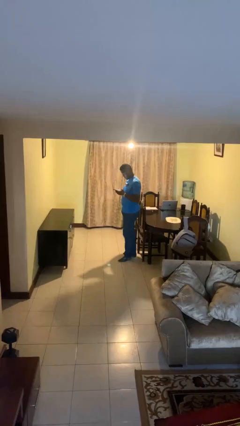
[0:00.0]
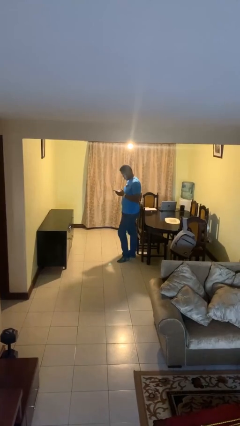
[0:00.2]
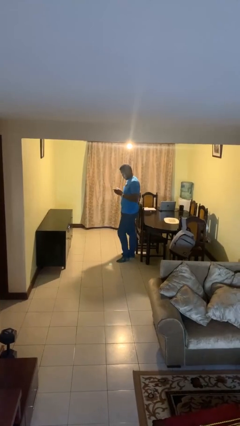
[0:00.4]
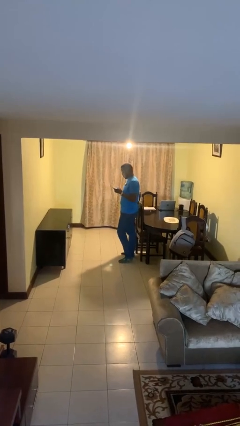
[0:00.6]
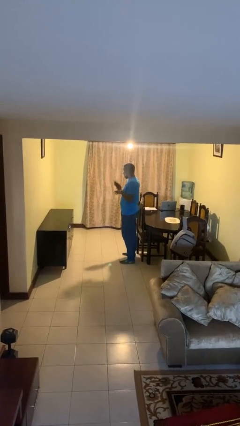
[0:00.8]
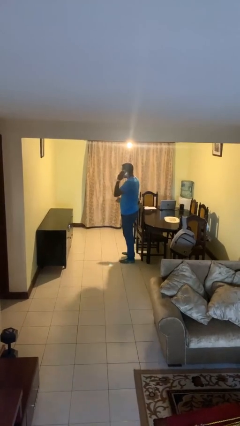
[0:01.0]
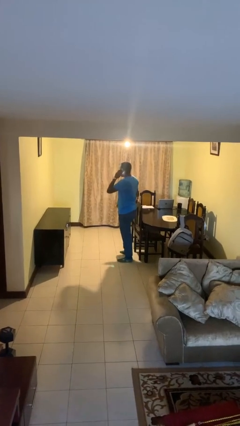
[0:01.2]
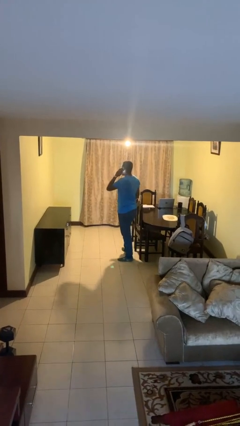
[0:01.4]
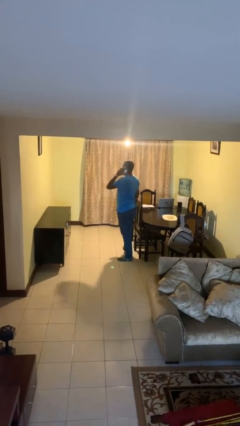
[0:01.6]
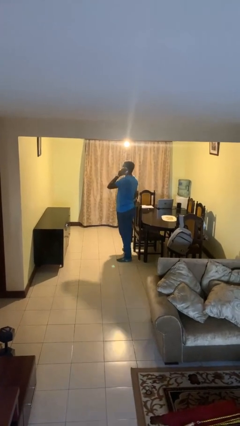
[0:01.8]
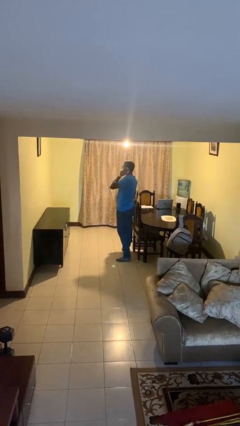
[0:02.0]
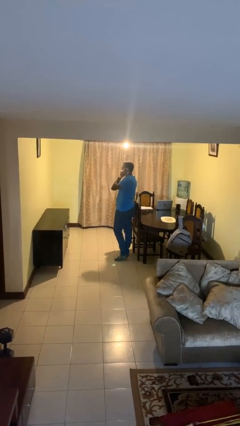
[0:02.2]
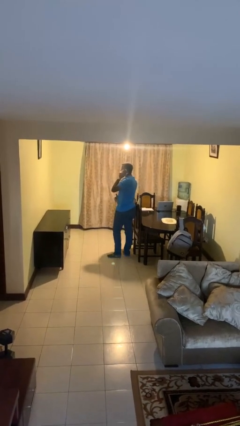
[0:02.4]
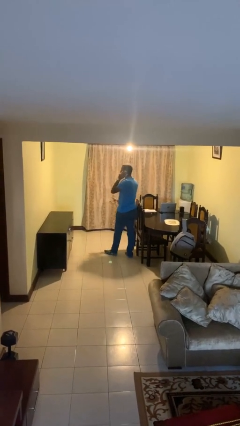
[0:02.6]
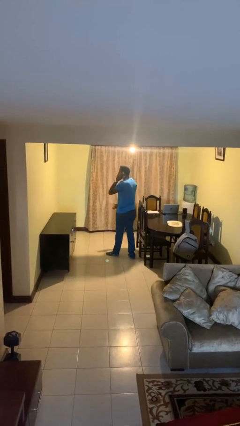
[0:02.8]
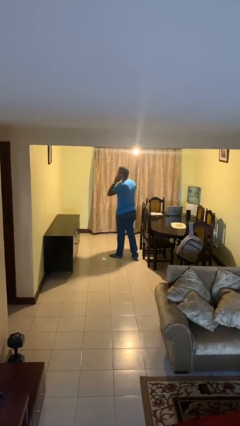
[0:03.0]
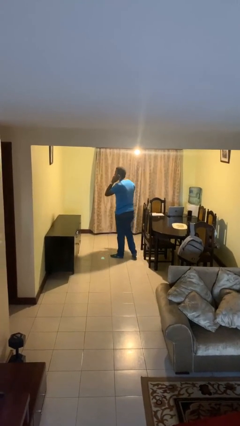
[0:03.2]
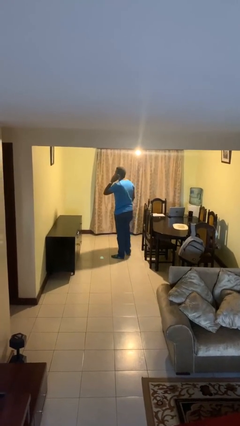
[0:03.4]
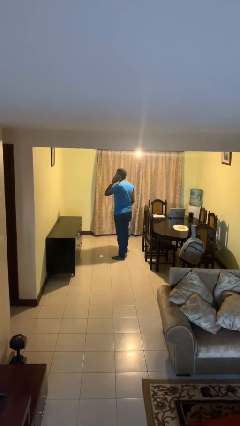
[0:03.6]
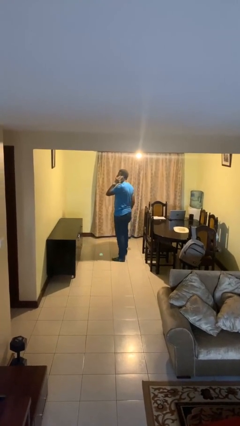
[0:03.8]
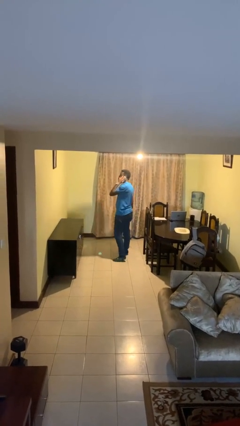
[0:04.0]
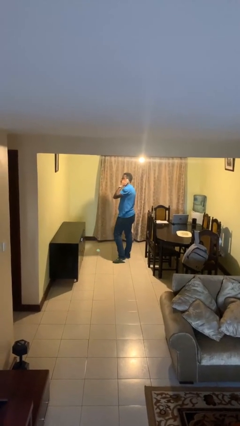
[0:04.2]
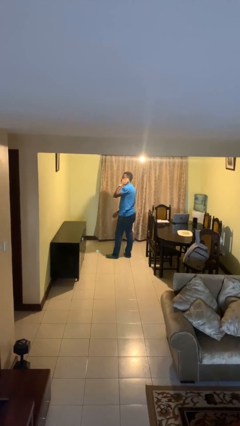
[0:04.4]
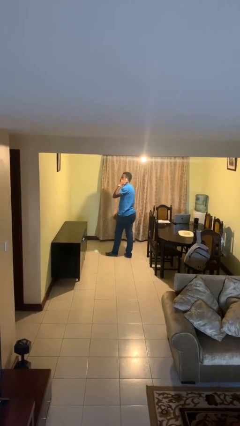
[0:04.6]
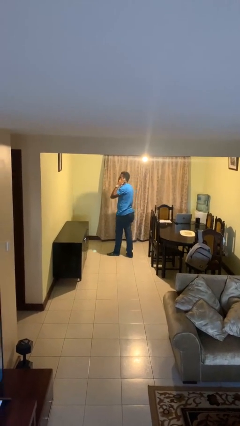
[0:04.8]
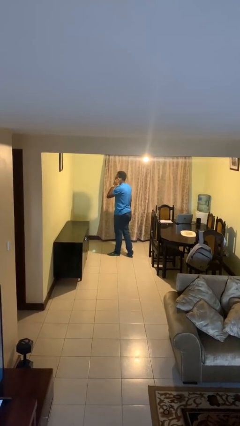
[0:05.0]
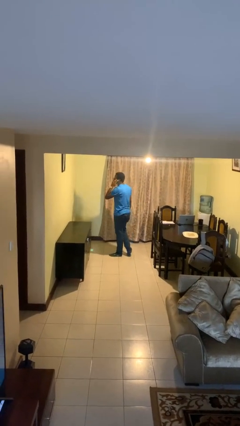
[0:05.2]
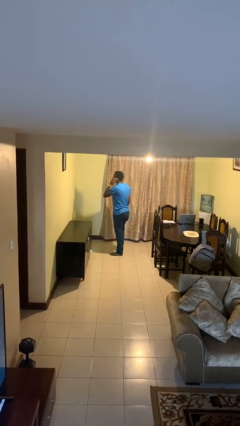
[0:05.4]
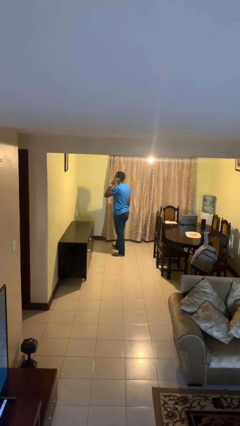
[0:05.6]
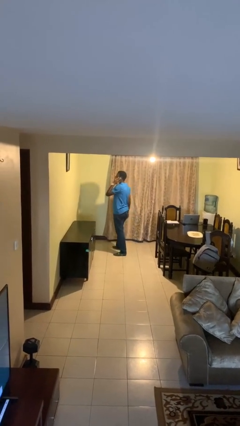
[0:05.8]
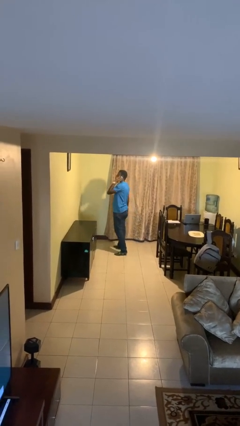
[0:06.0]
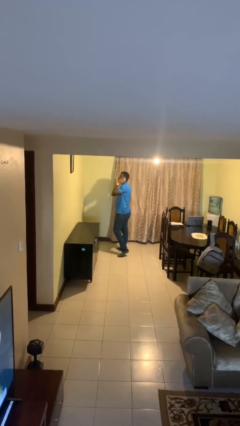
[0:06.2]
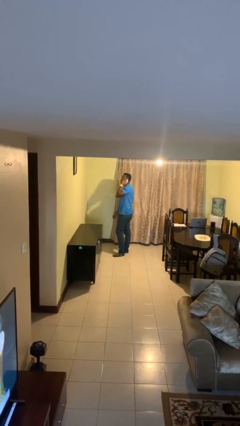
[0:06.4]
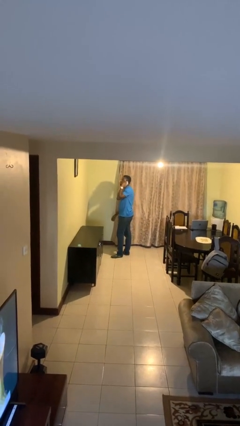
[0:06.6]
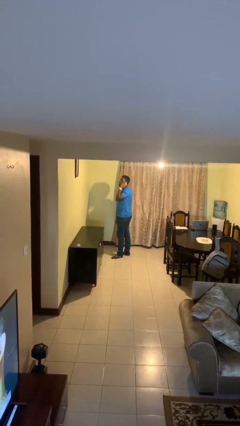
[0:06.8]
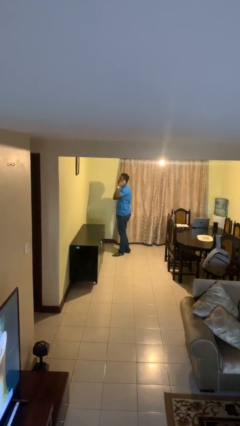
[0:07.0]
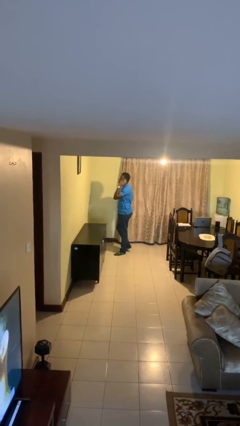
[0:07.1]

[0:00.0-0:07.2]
person talks on phone

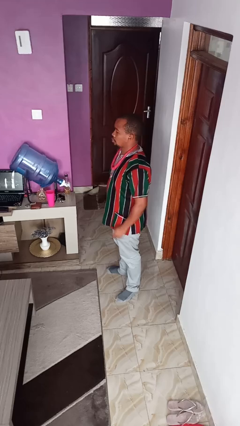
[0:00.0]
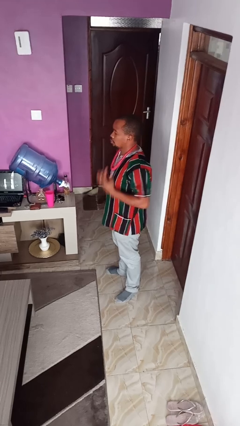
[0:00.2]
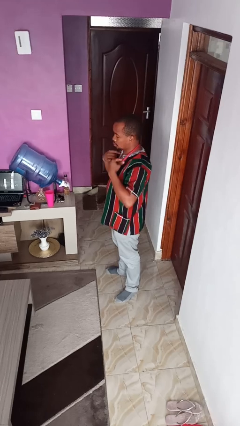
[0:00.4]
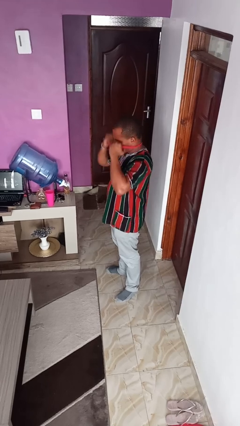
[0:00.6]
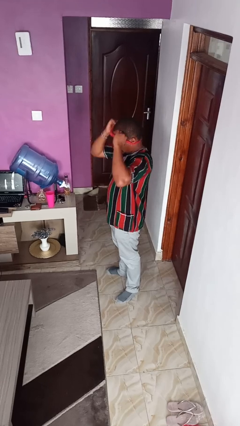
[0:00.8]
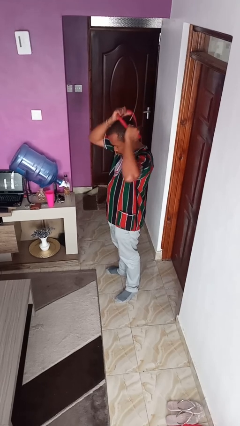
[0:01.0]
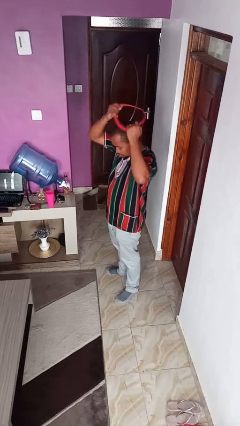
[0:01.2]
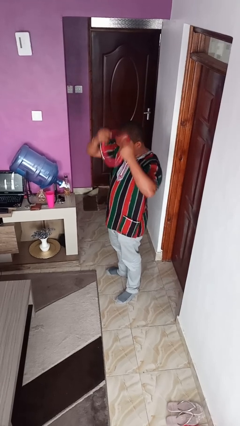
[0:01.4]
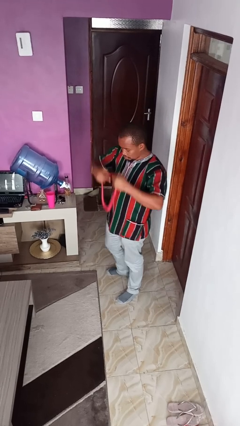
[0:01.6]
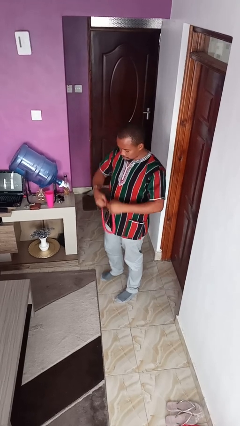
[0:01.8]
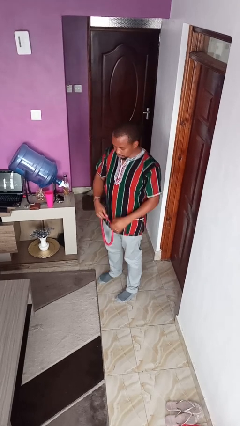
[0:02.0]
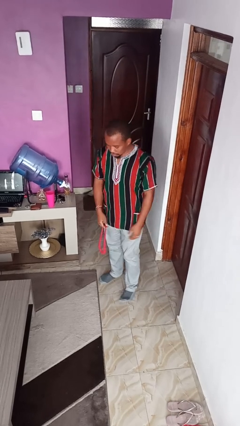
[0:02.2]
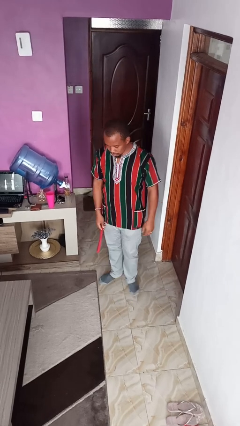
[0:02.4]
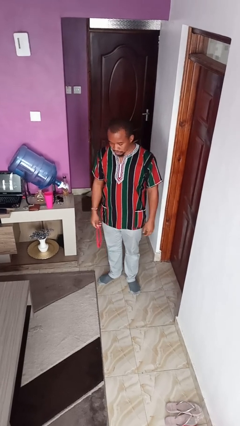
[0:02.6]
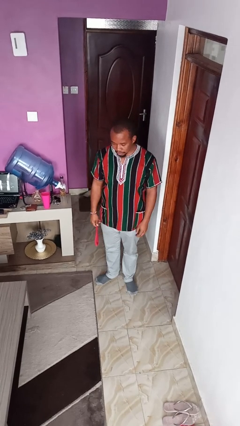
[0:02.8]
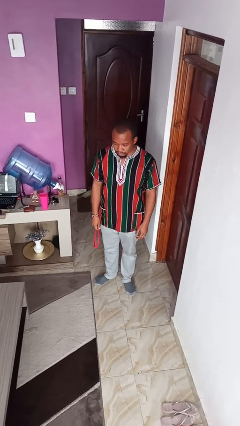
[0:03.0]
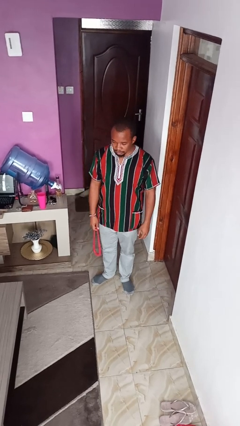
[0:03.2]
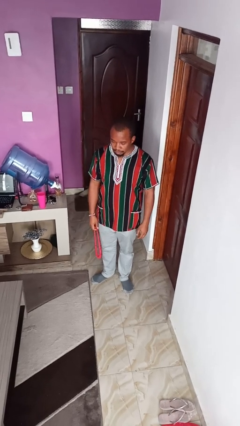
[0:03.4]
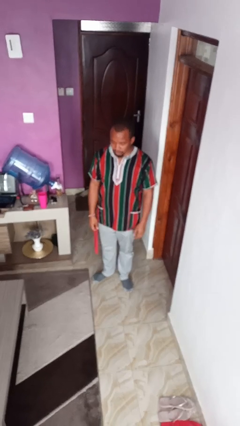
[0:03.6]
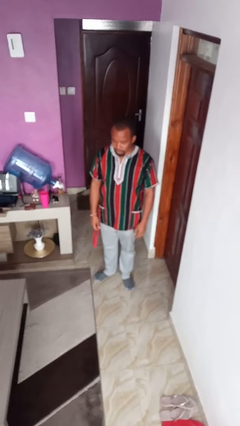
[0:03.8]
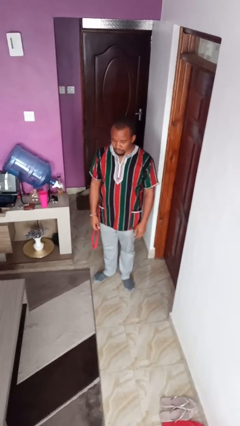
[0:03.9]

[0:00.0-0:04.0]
person takes off necklace

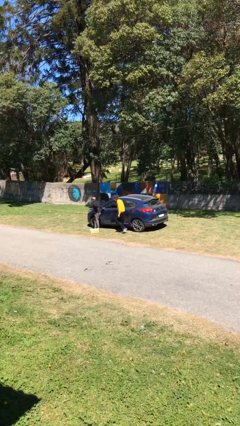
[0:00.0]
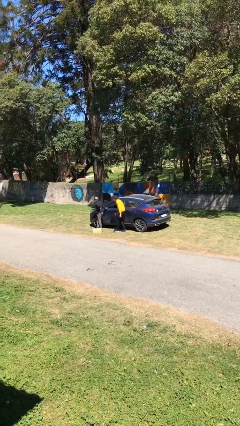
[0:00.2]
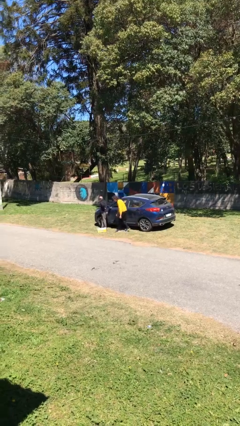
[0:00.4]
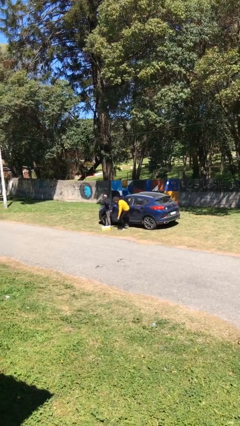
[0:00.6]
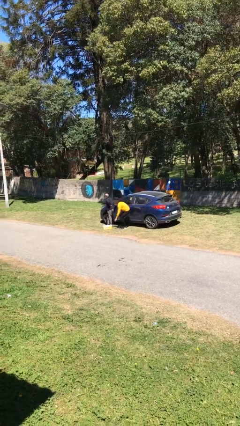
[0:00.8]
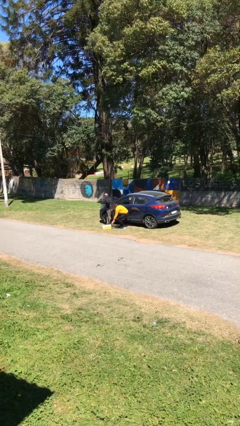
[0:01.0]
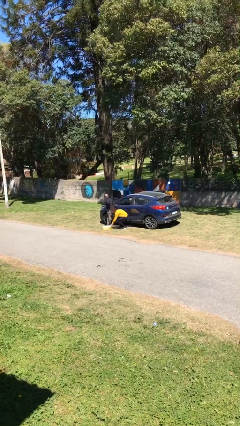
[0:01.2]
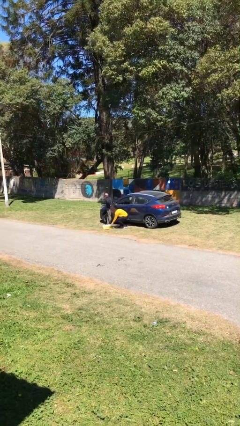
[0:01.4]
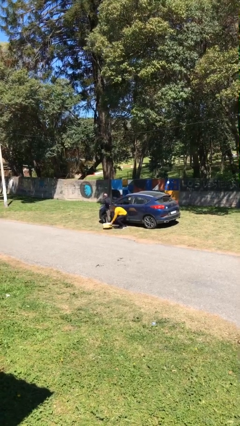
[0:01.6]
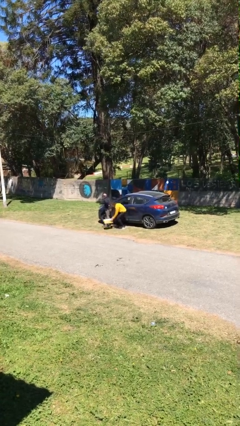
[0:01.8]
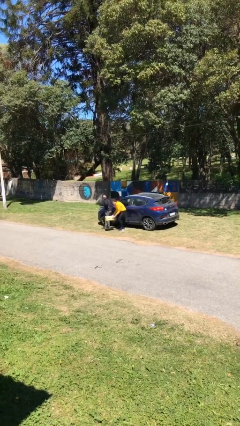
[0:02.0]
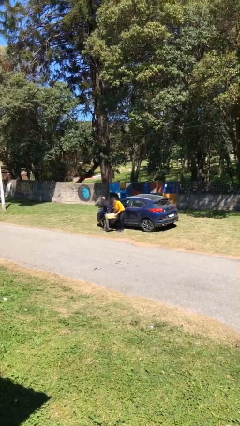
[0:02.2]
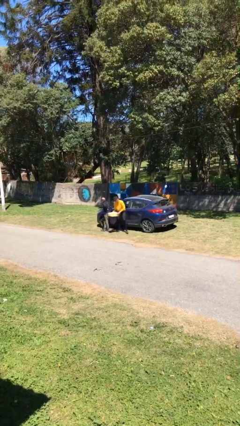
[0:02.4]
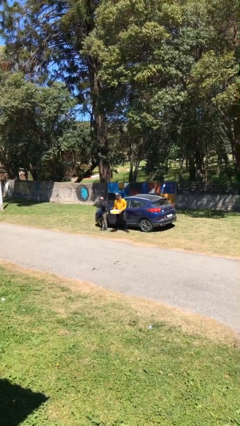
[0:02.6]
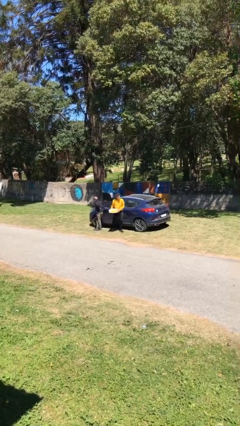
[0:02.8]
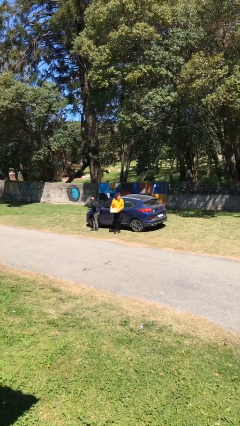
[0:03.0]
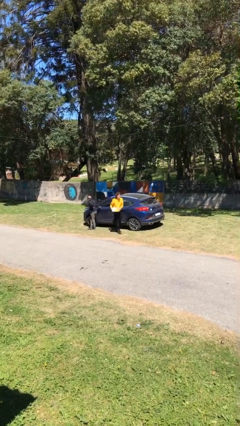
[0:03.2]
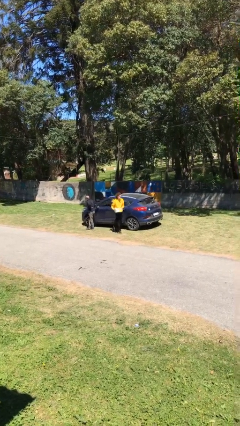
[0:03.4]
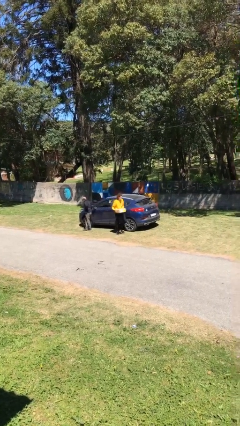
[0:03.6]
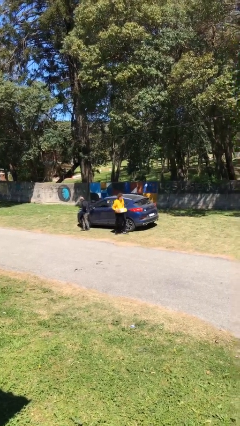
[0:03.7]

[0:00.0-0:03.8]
person steals object from person

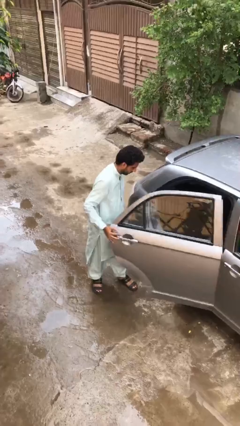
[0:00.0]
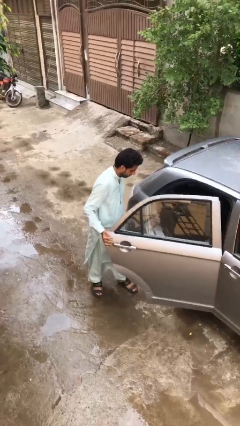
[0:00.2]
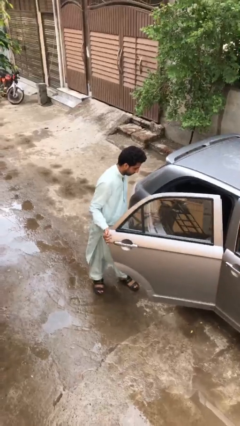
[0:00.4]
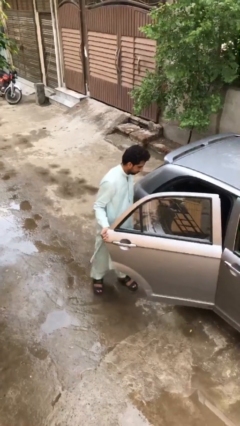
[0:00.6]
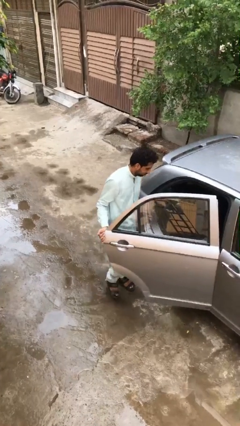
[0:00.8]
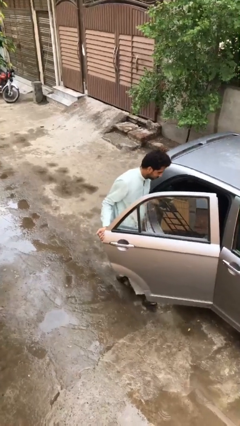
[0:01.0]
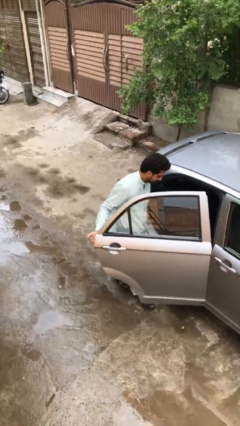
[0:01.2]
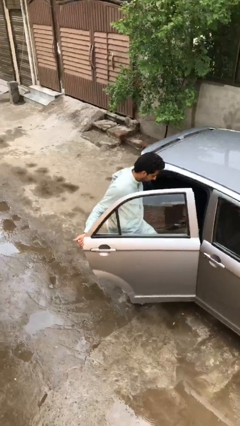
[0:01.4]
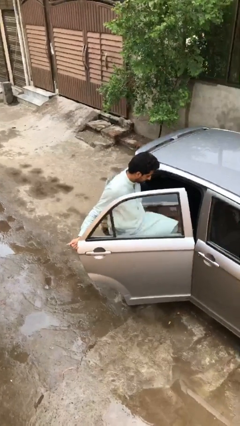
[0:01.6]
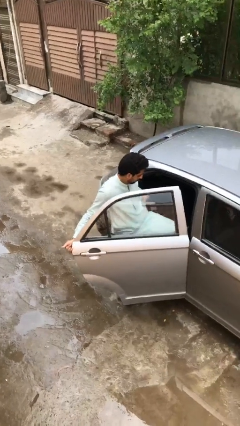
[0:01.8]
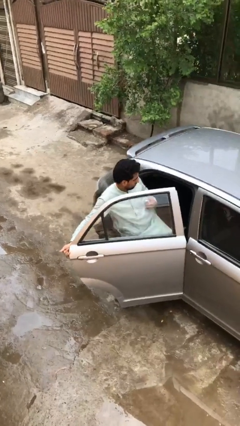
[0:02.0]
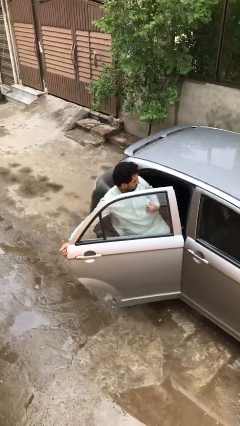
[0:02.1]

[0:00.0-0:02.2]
person enters car

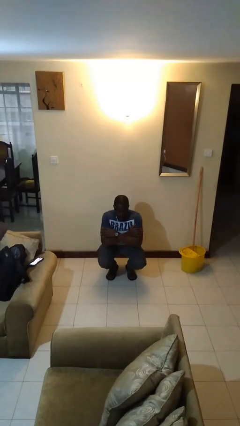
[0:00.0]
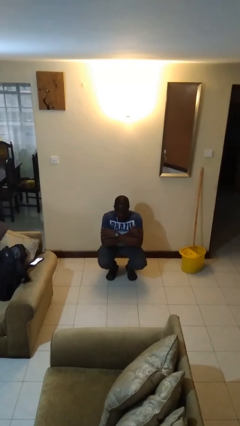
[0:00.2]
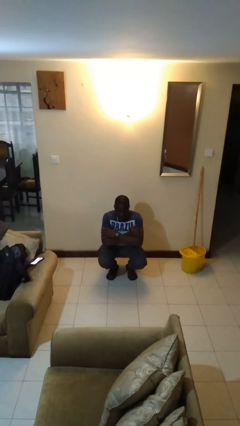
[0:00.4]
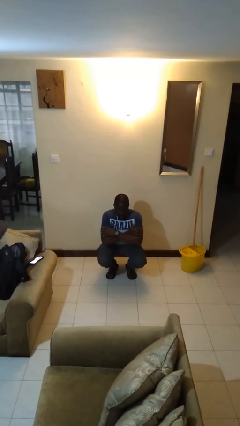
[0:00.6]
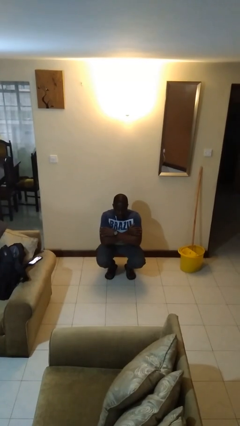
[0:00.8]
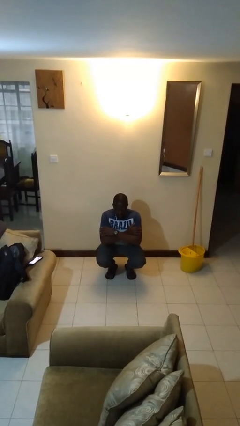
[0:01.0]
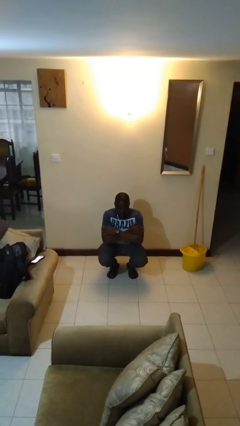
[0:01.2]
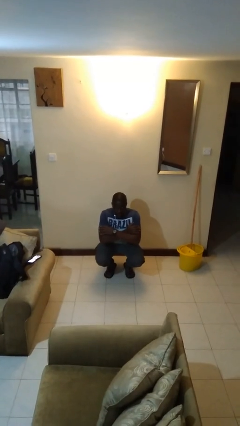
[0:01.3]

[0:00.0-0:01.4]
person squats
